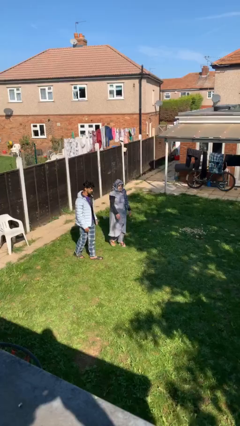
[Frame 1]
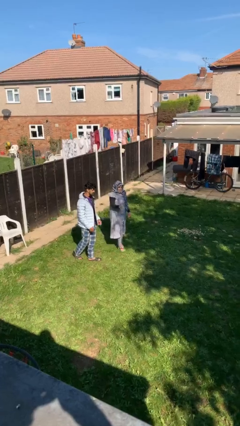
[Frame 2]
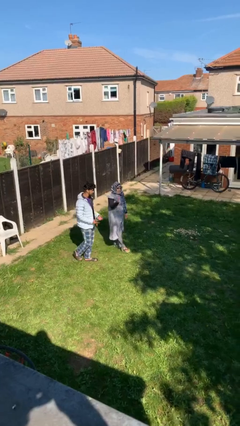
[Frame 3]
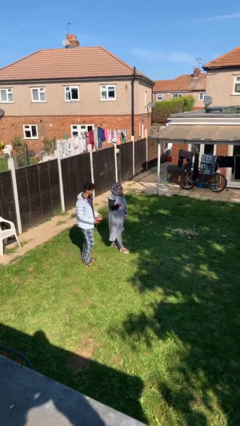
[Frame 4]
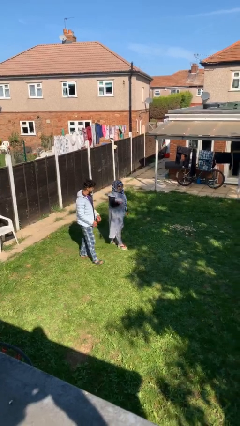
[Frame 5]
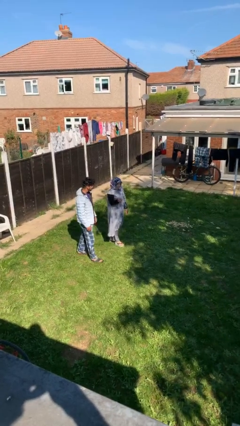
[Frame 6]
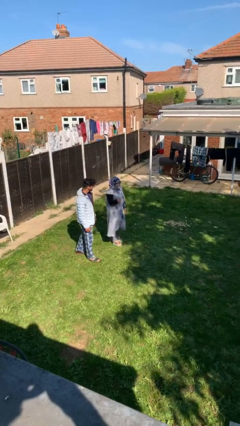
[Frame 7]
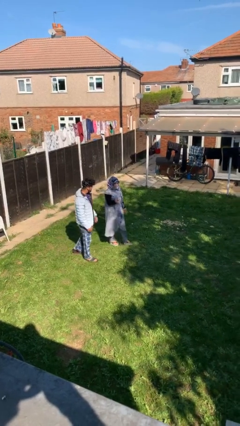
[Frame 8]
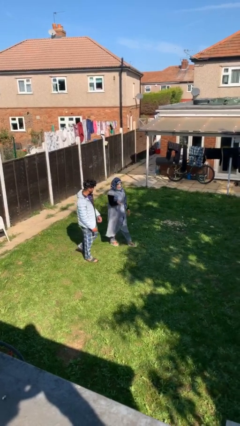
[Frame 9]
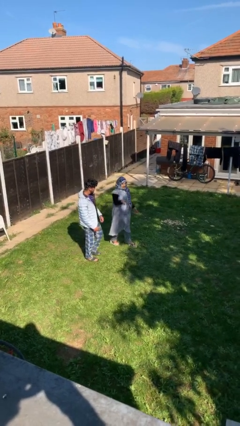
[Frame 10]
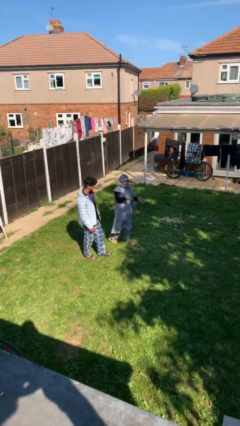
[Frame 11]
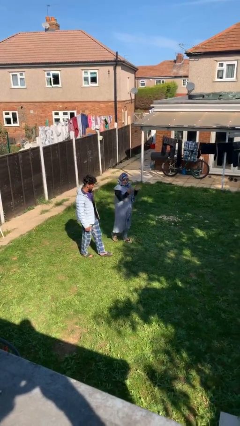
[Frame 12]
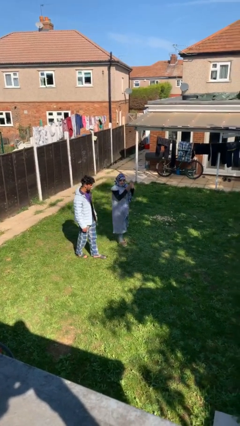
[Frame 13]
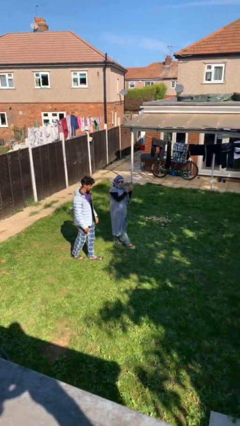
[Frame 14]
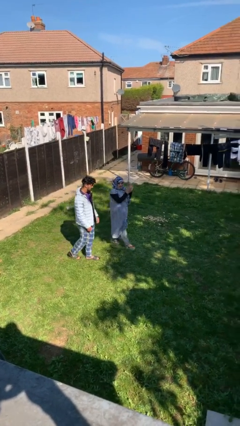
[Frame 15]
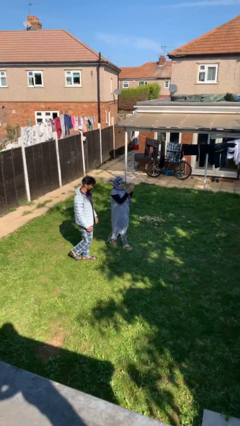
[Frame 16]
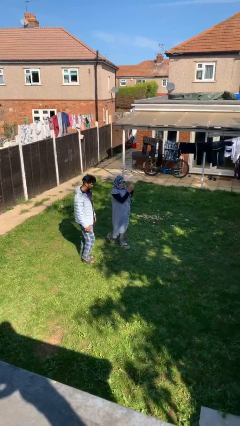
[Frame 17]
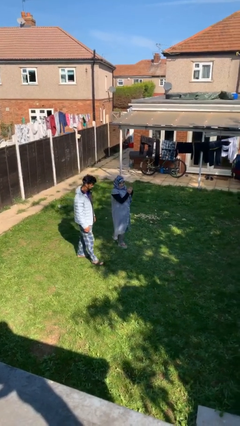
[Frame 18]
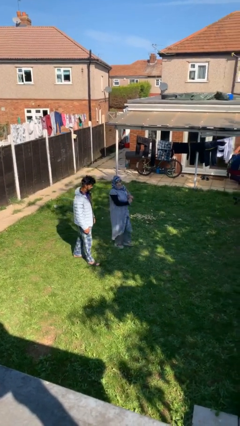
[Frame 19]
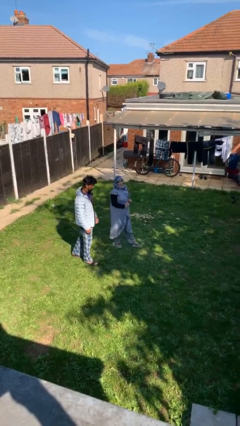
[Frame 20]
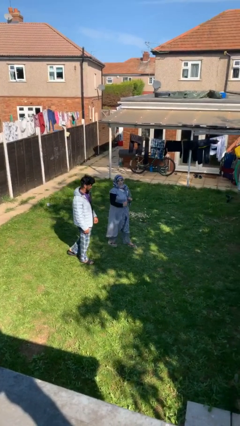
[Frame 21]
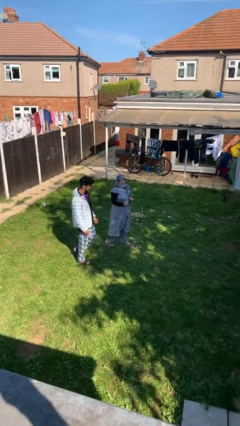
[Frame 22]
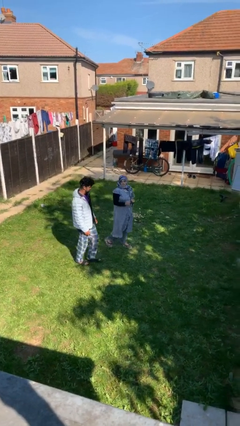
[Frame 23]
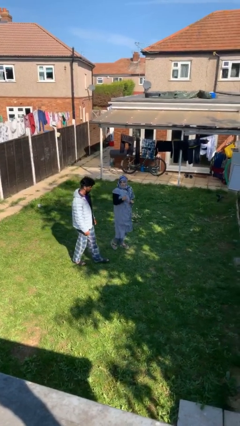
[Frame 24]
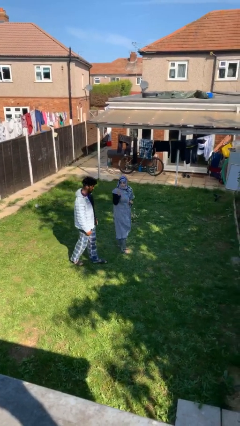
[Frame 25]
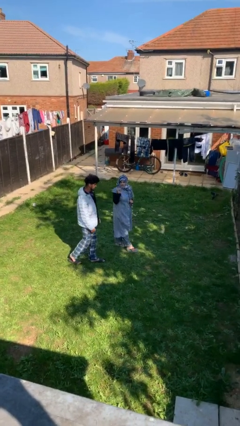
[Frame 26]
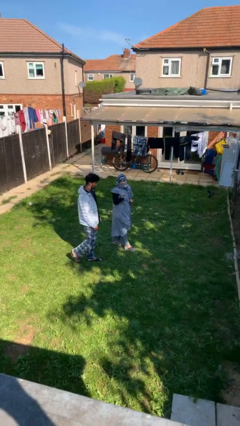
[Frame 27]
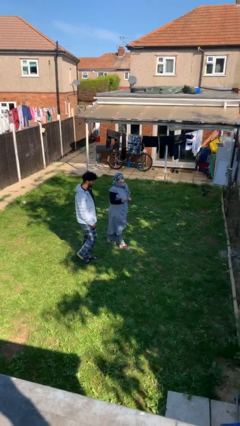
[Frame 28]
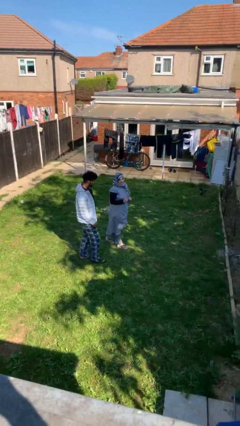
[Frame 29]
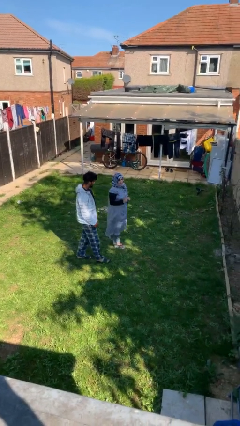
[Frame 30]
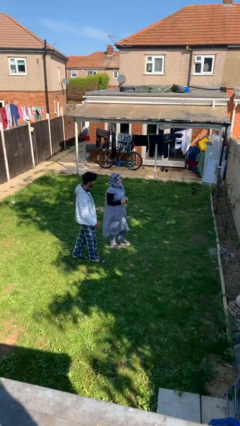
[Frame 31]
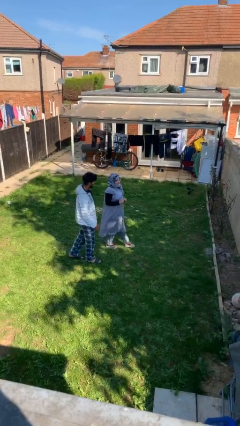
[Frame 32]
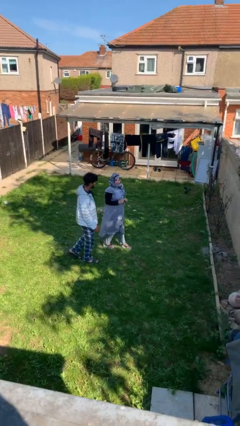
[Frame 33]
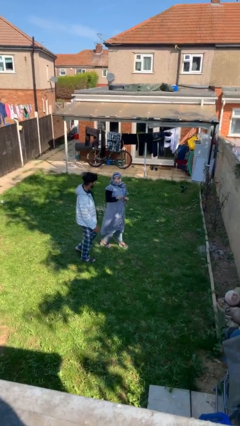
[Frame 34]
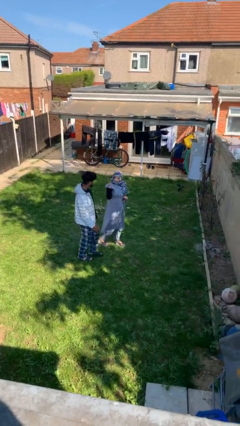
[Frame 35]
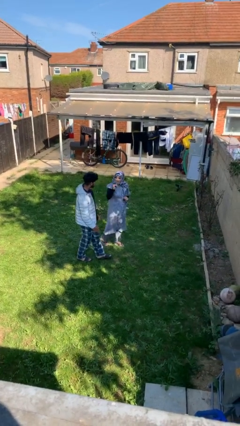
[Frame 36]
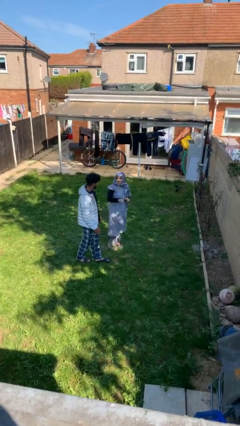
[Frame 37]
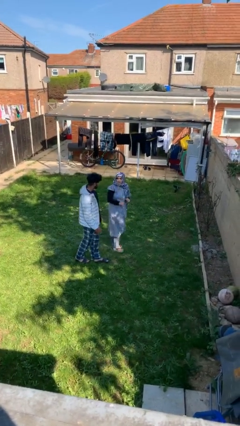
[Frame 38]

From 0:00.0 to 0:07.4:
person talks to person

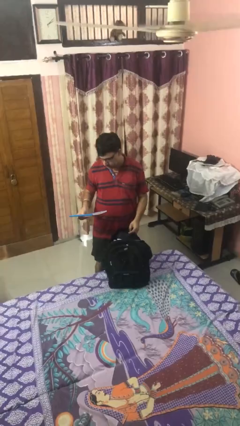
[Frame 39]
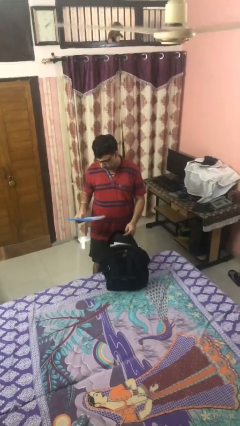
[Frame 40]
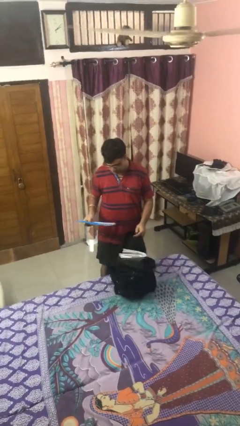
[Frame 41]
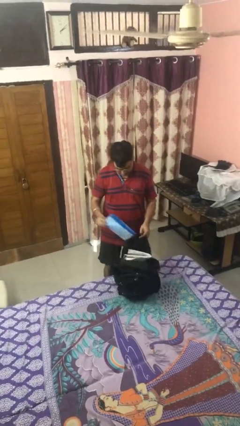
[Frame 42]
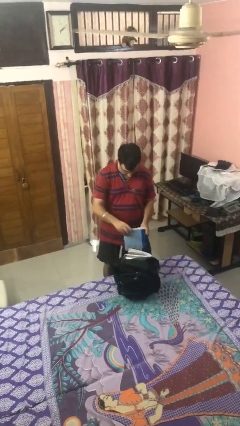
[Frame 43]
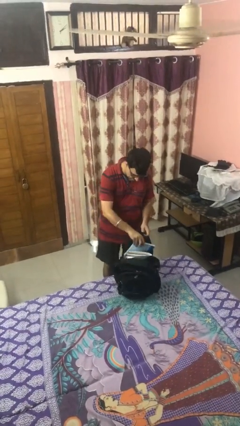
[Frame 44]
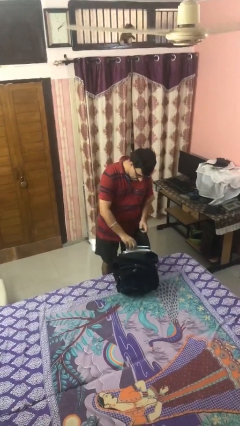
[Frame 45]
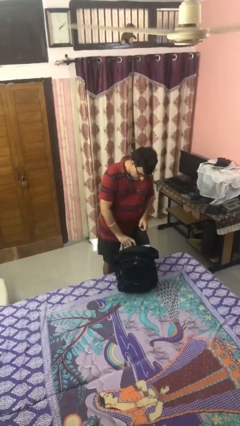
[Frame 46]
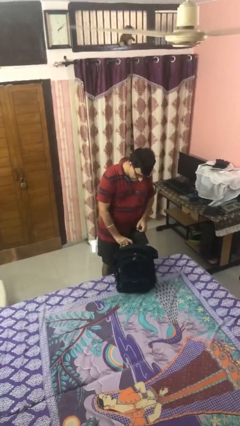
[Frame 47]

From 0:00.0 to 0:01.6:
person puts object into backpack

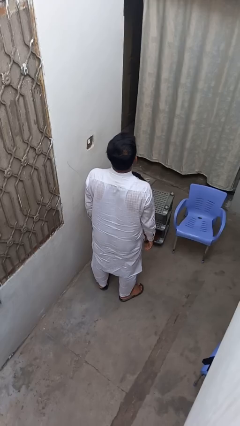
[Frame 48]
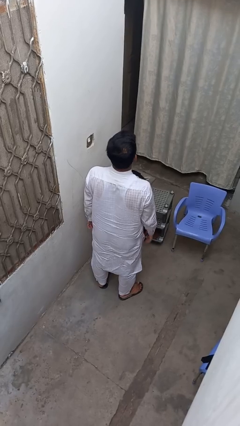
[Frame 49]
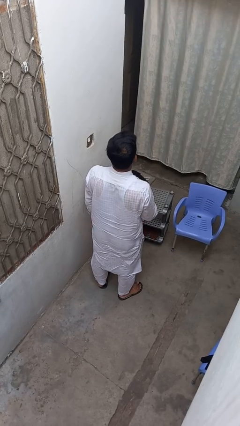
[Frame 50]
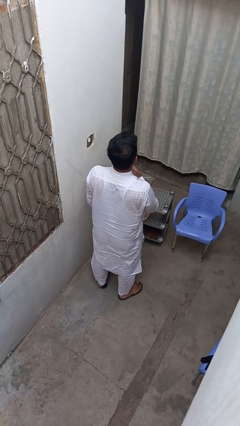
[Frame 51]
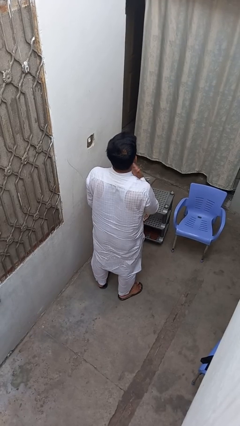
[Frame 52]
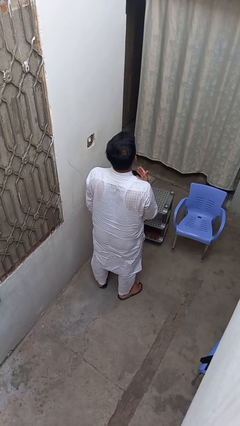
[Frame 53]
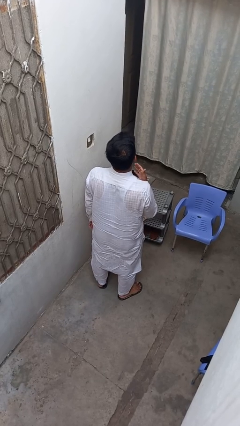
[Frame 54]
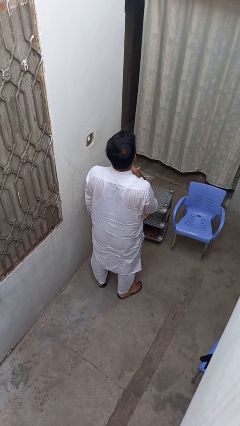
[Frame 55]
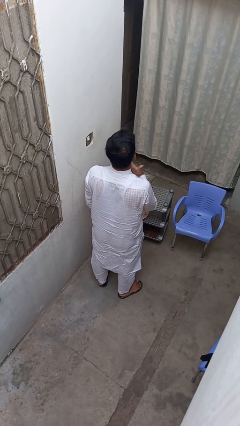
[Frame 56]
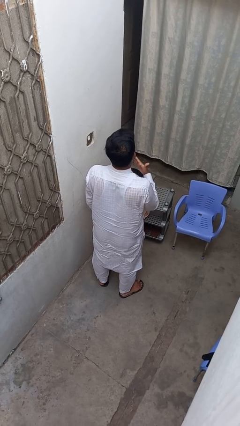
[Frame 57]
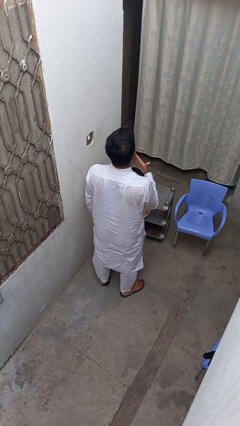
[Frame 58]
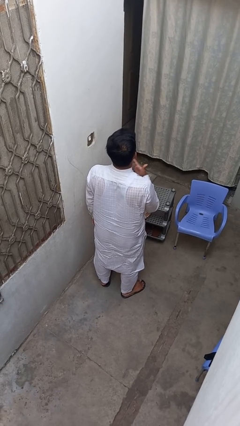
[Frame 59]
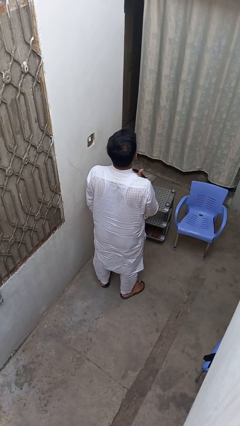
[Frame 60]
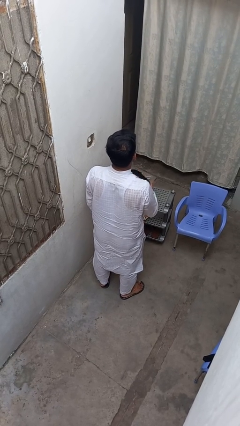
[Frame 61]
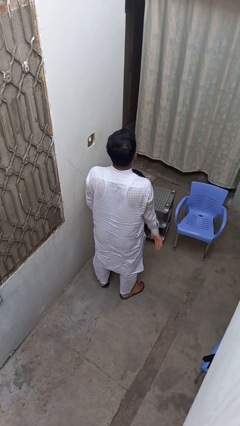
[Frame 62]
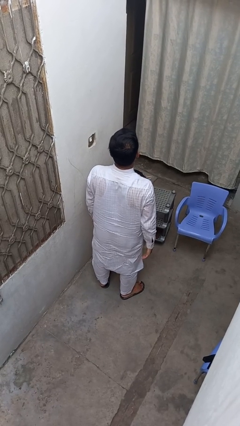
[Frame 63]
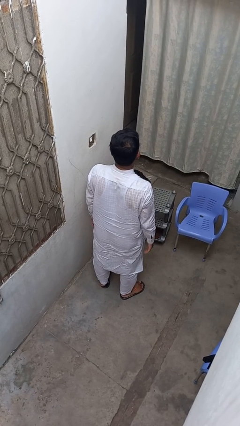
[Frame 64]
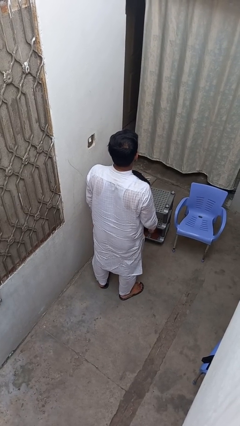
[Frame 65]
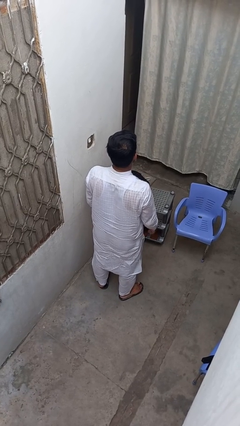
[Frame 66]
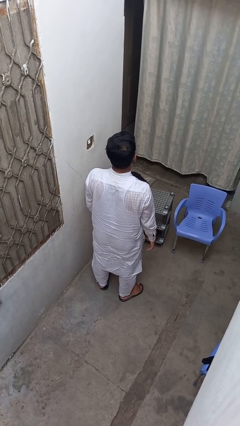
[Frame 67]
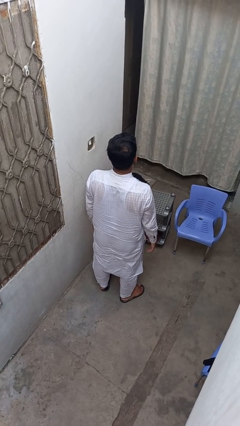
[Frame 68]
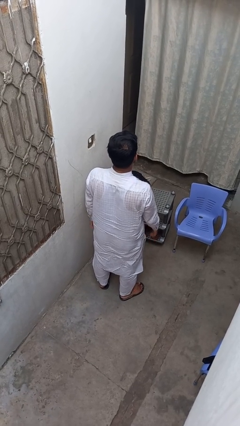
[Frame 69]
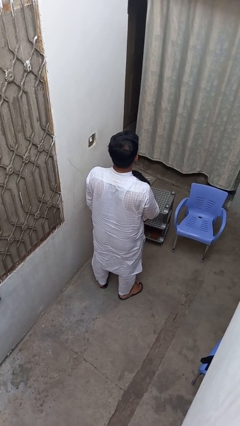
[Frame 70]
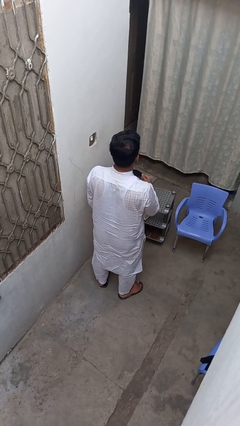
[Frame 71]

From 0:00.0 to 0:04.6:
person drums on chest

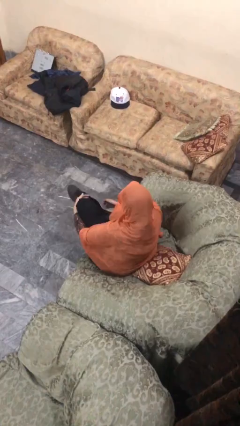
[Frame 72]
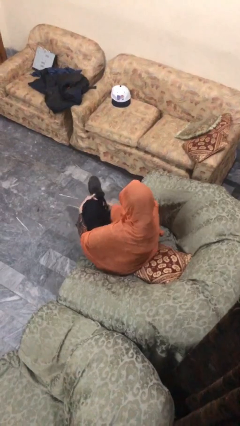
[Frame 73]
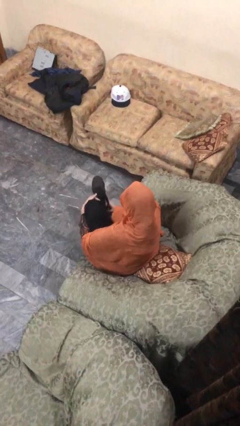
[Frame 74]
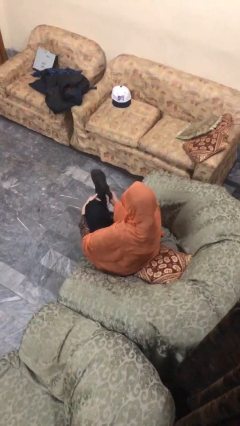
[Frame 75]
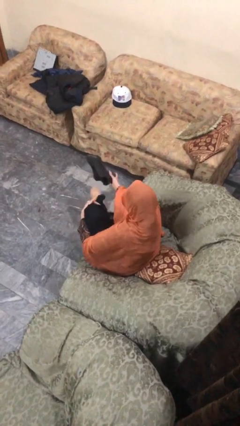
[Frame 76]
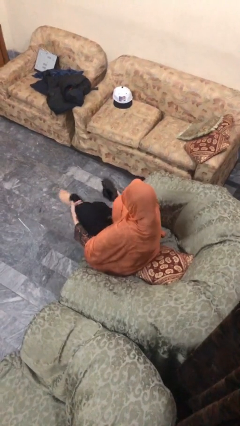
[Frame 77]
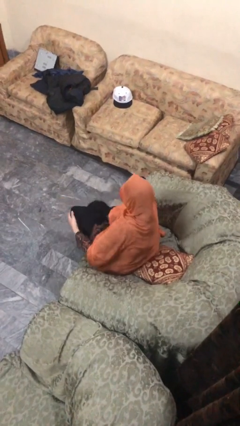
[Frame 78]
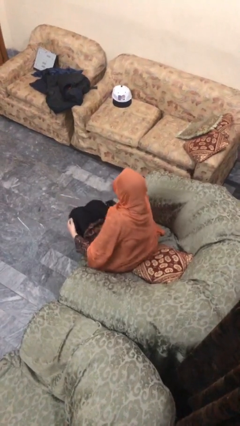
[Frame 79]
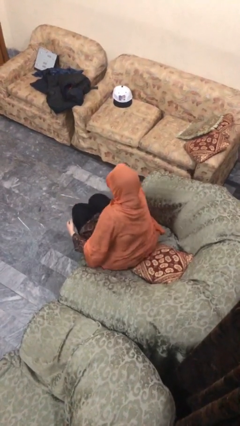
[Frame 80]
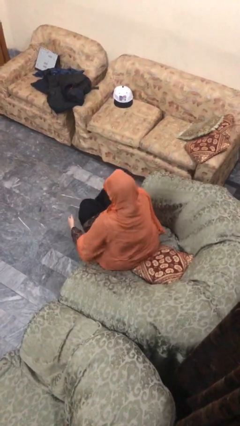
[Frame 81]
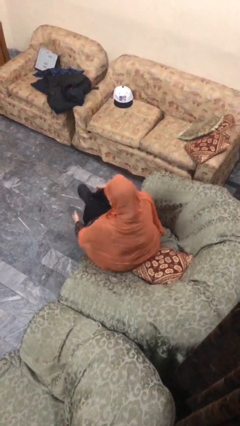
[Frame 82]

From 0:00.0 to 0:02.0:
person takes off shoes

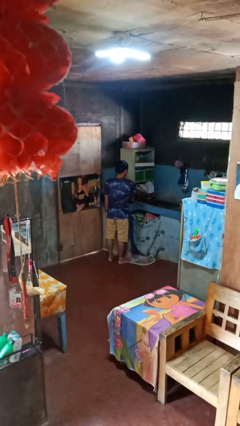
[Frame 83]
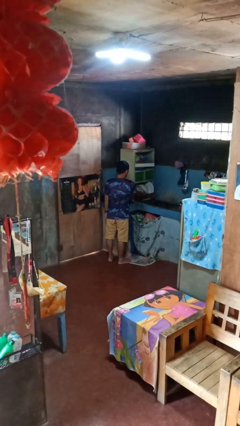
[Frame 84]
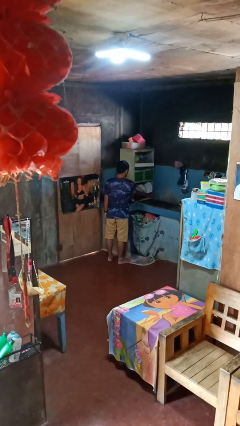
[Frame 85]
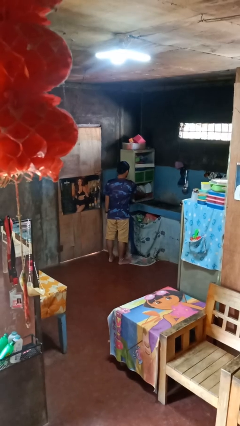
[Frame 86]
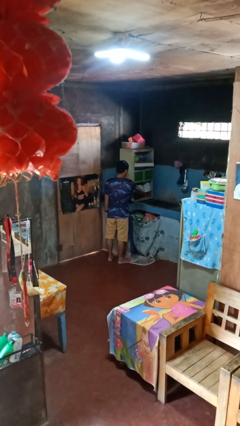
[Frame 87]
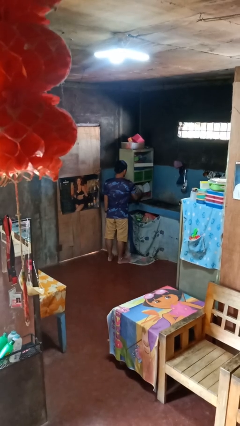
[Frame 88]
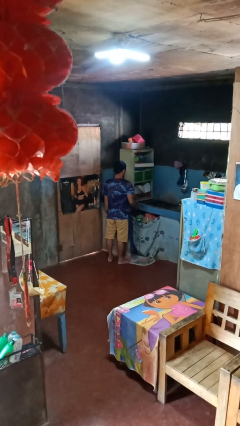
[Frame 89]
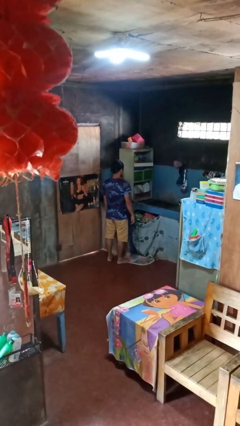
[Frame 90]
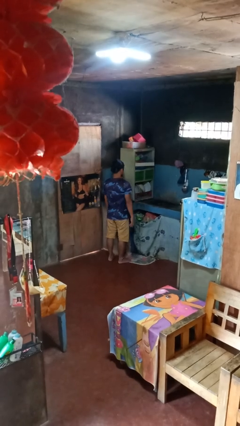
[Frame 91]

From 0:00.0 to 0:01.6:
person closes dishwasher
